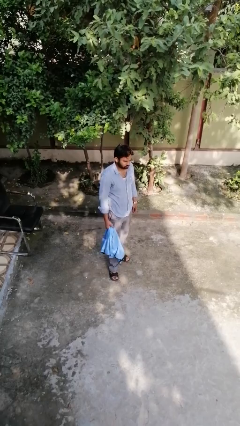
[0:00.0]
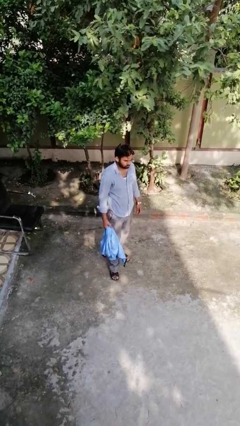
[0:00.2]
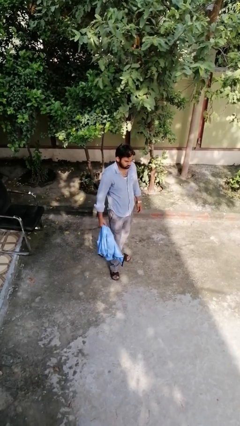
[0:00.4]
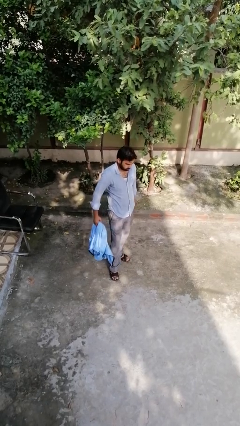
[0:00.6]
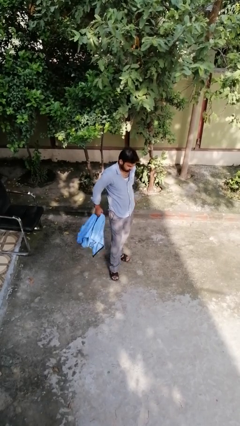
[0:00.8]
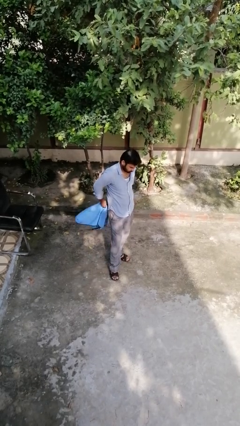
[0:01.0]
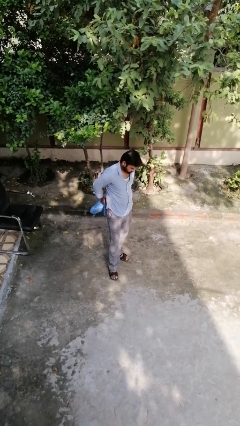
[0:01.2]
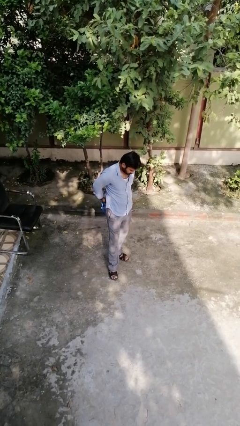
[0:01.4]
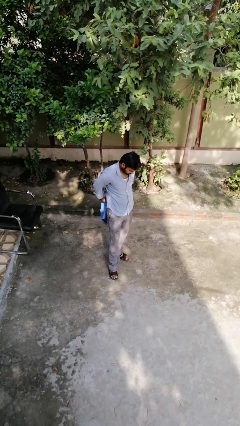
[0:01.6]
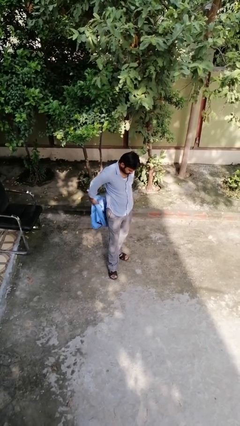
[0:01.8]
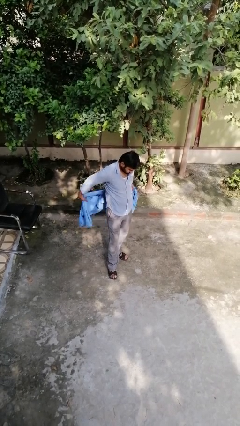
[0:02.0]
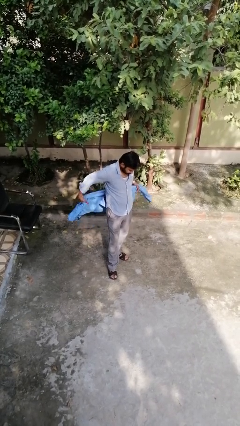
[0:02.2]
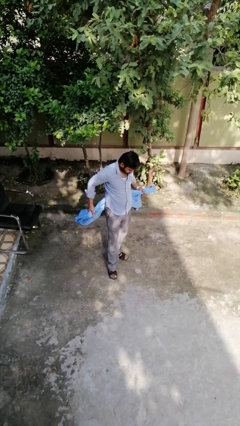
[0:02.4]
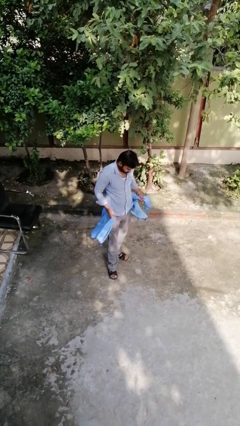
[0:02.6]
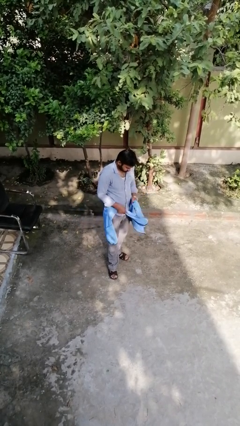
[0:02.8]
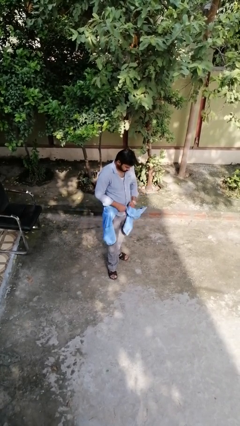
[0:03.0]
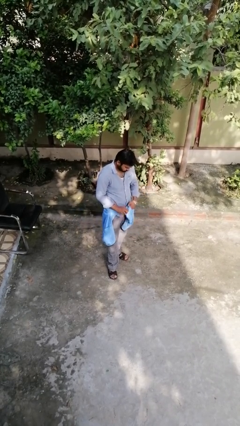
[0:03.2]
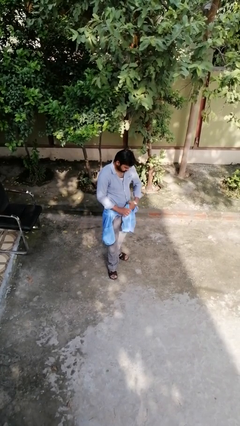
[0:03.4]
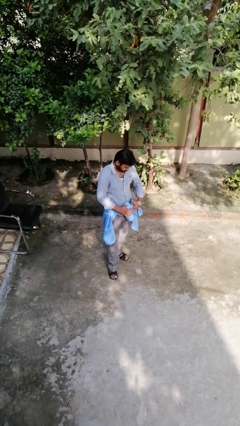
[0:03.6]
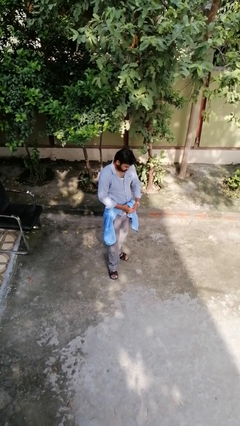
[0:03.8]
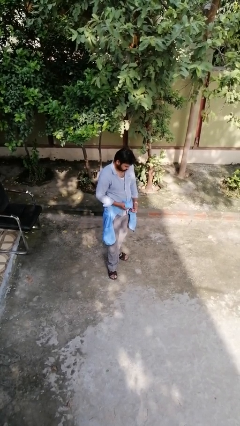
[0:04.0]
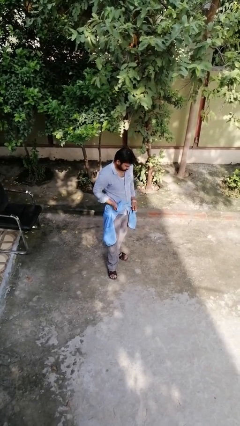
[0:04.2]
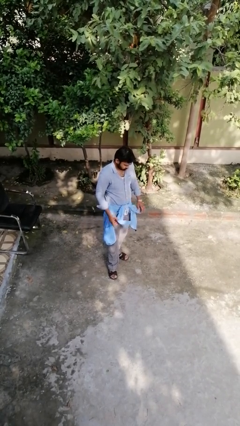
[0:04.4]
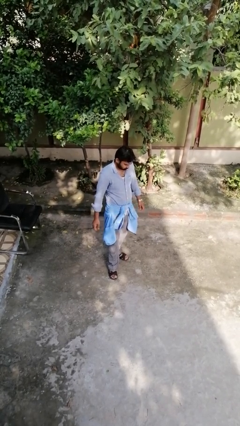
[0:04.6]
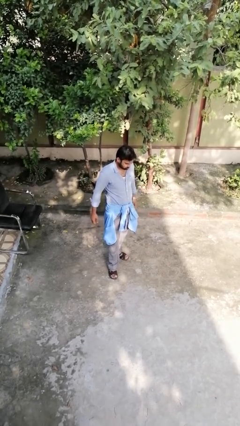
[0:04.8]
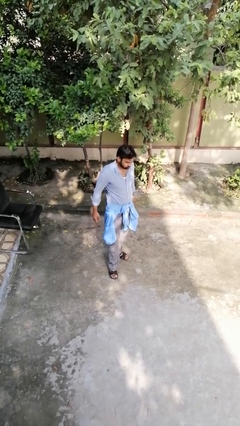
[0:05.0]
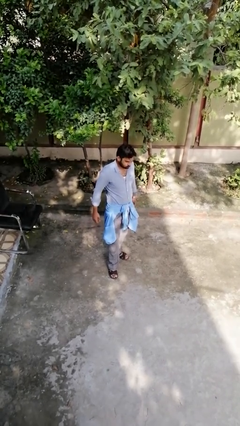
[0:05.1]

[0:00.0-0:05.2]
person ties jacket around waist

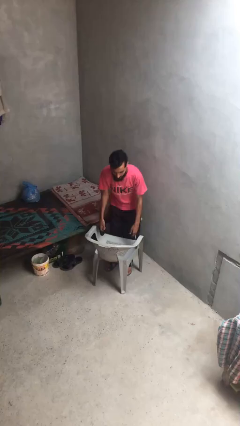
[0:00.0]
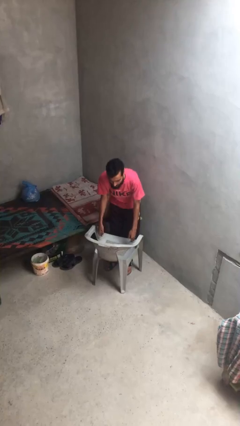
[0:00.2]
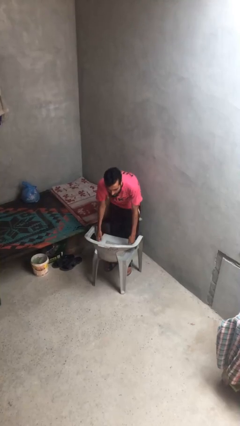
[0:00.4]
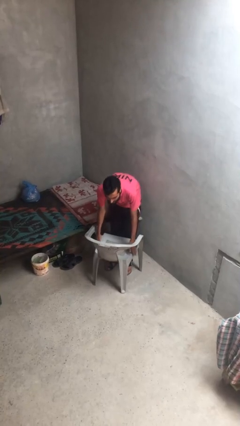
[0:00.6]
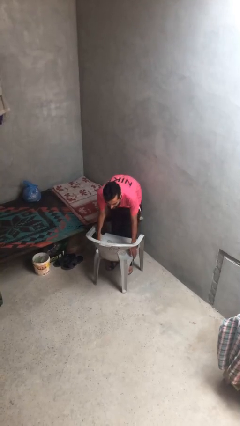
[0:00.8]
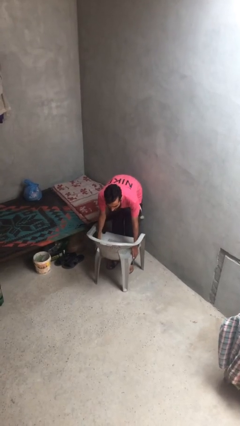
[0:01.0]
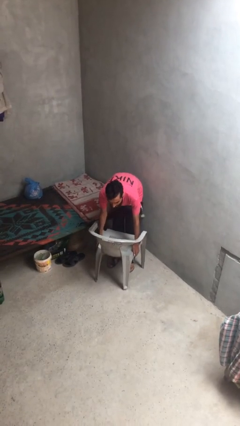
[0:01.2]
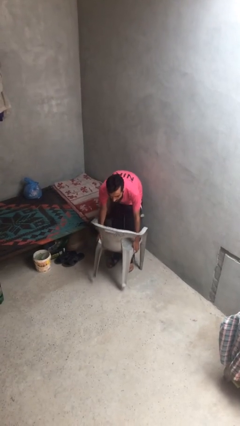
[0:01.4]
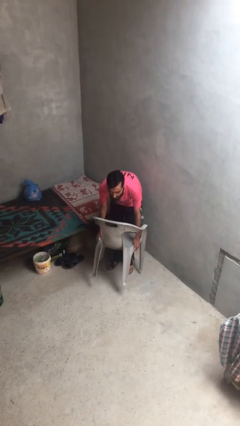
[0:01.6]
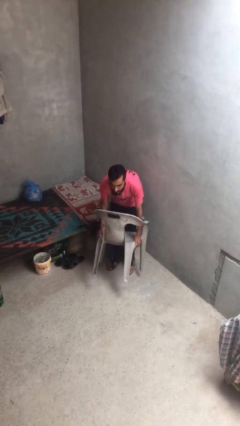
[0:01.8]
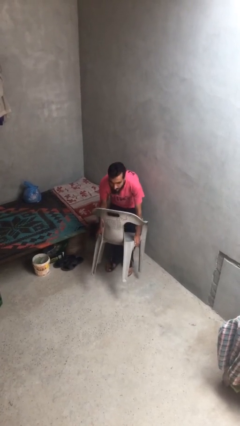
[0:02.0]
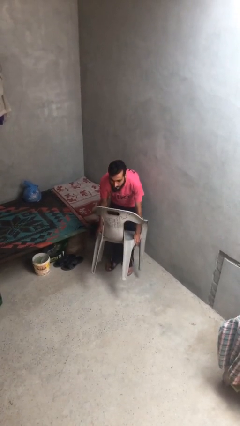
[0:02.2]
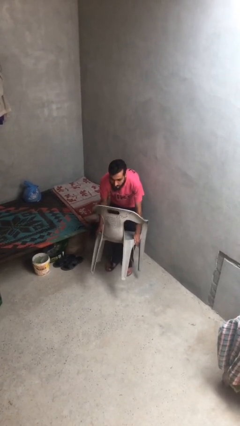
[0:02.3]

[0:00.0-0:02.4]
person picks up object from floor

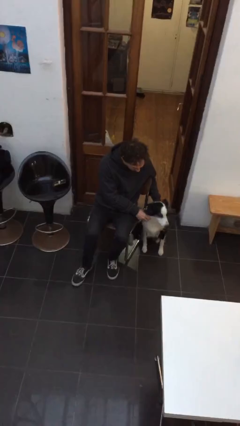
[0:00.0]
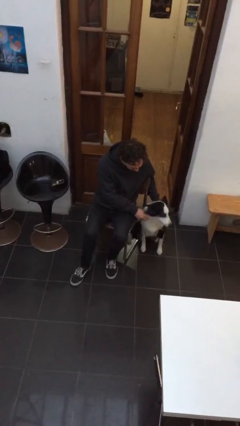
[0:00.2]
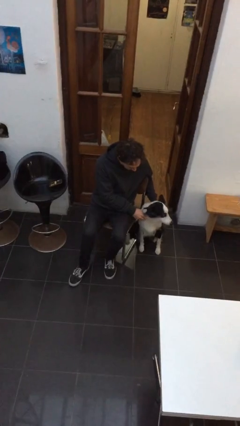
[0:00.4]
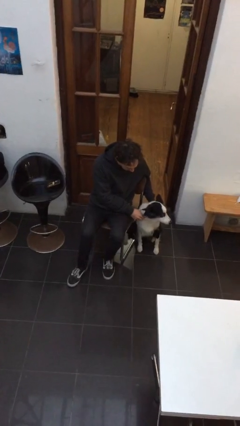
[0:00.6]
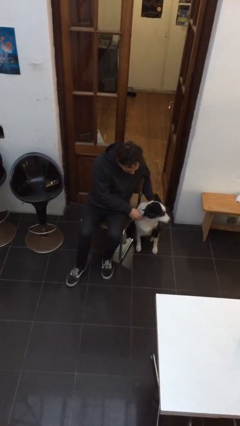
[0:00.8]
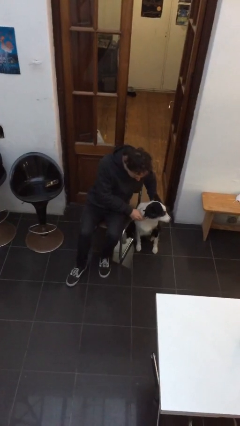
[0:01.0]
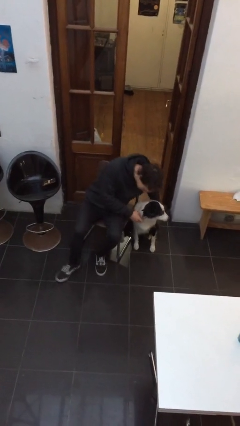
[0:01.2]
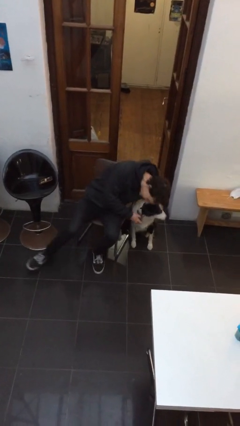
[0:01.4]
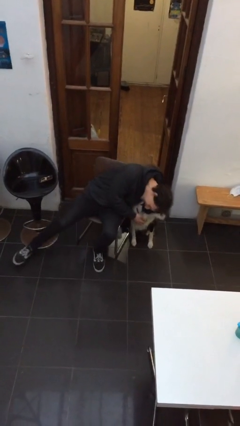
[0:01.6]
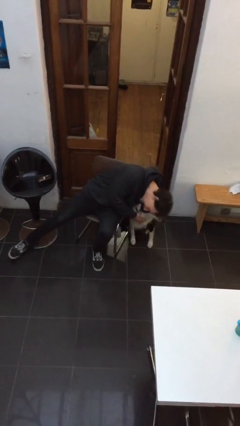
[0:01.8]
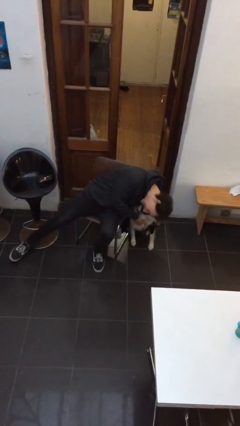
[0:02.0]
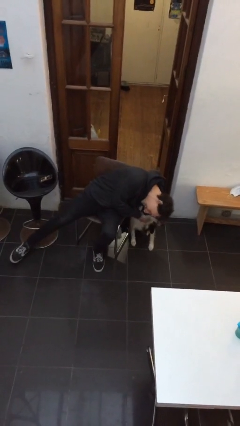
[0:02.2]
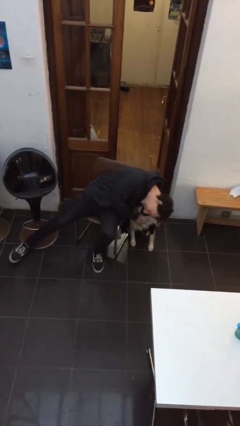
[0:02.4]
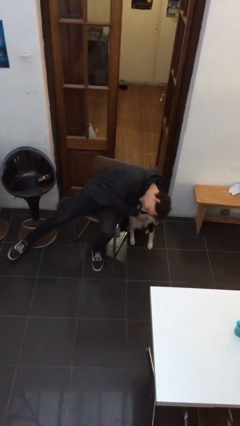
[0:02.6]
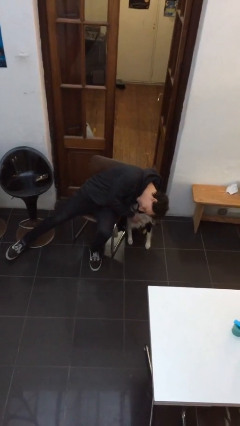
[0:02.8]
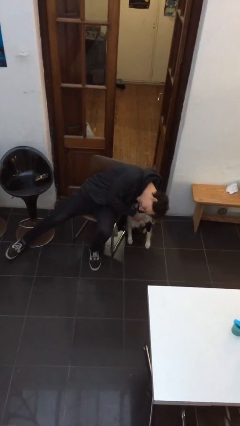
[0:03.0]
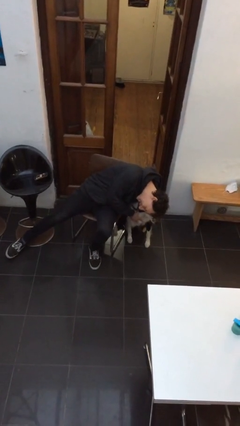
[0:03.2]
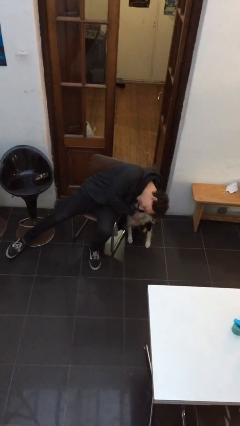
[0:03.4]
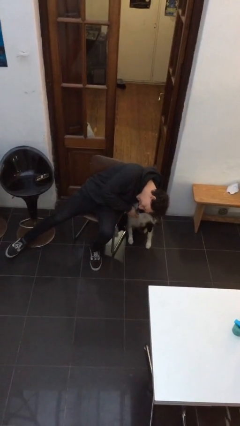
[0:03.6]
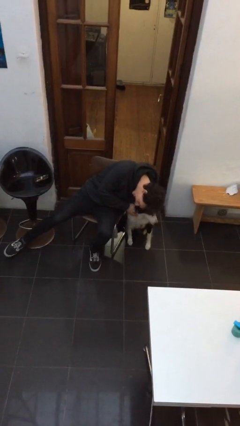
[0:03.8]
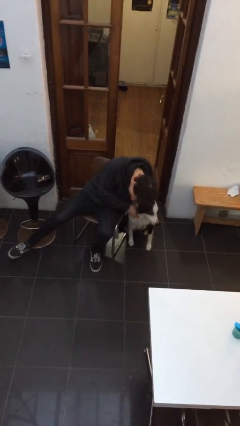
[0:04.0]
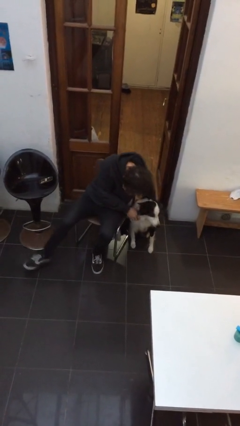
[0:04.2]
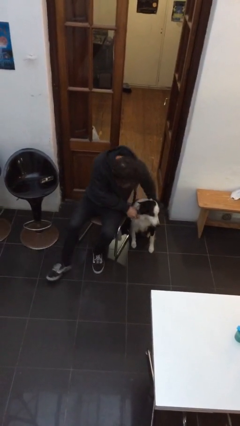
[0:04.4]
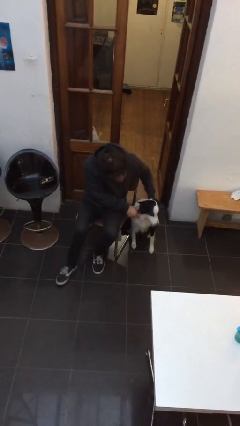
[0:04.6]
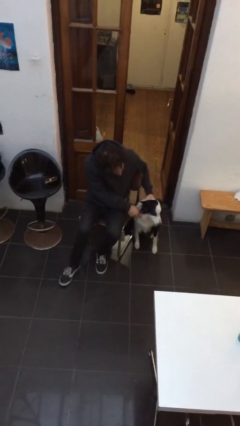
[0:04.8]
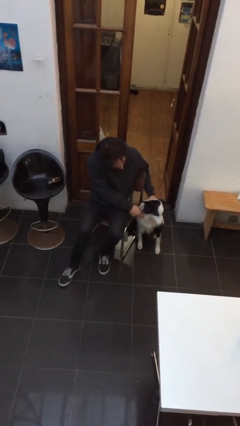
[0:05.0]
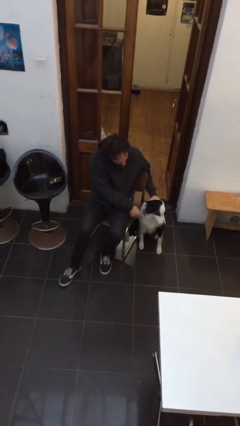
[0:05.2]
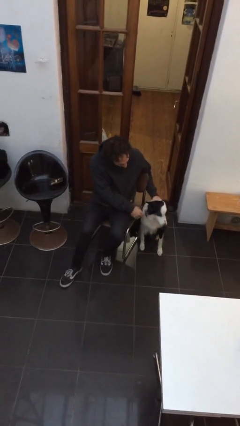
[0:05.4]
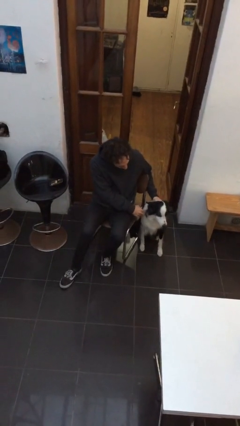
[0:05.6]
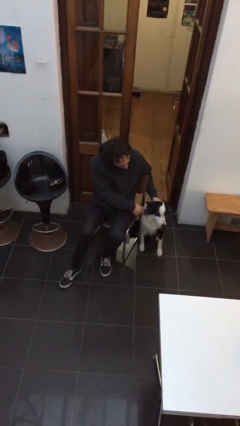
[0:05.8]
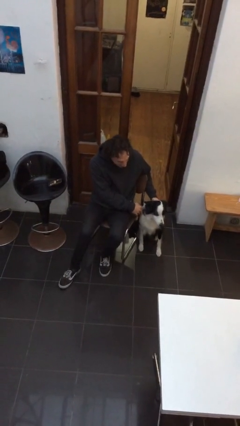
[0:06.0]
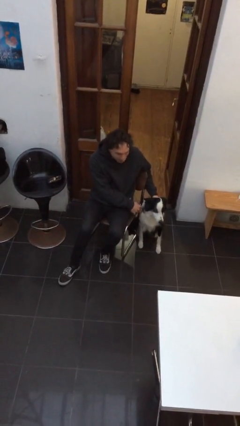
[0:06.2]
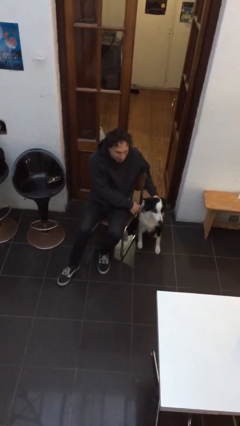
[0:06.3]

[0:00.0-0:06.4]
person hugs dog

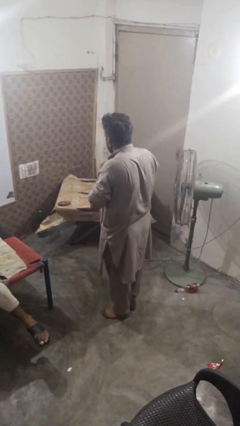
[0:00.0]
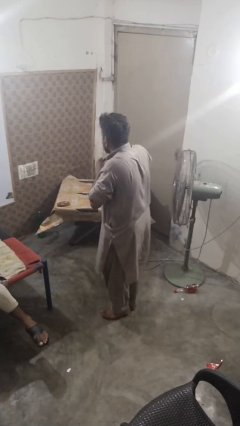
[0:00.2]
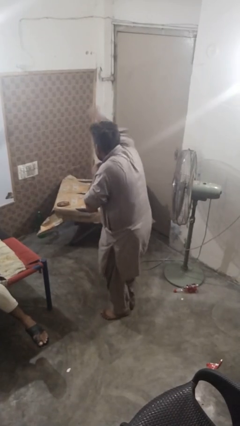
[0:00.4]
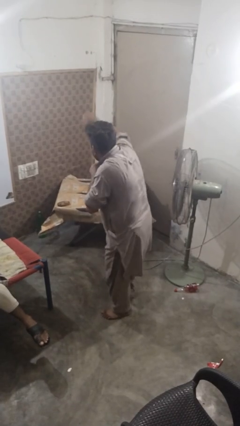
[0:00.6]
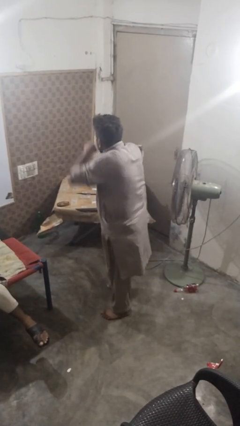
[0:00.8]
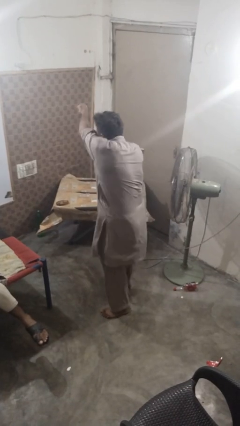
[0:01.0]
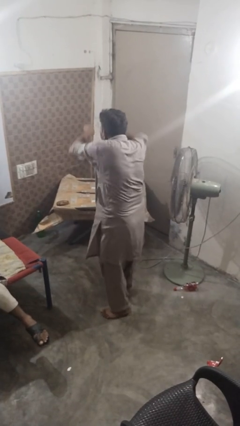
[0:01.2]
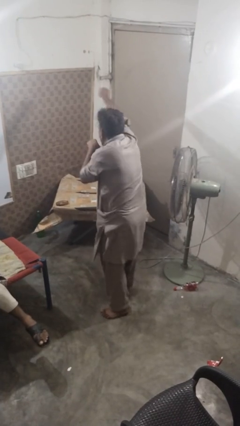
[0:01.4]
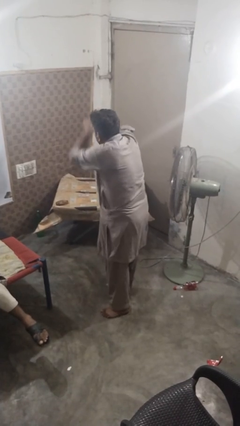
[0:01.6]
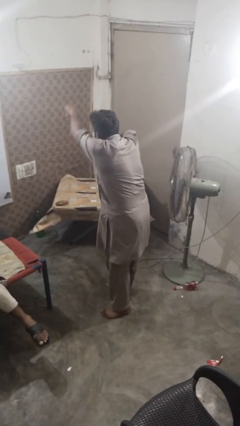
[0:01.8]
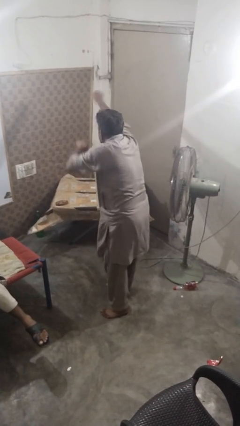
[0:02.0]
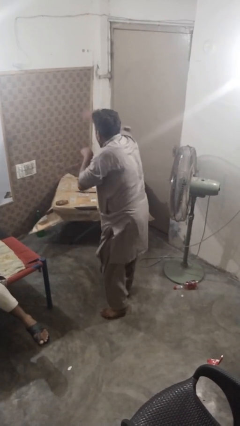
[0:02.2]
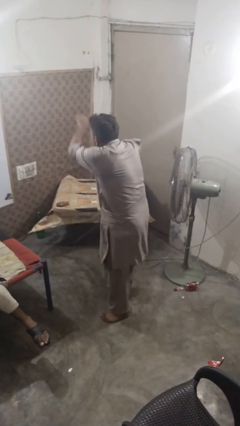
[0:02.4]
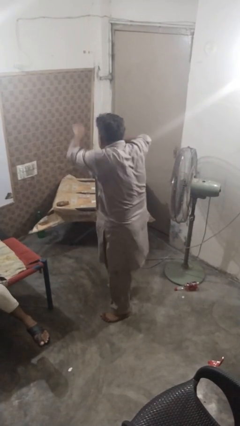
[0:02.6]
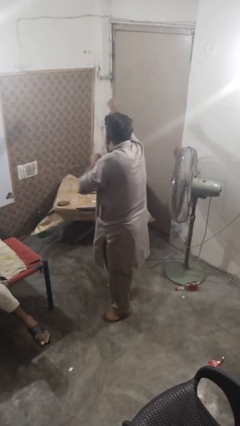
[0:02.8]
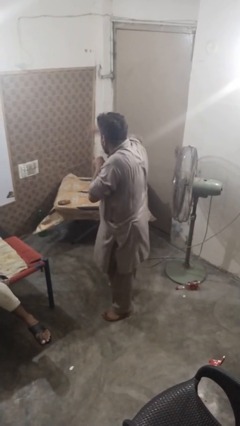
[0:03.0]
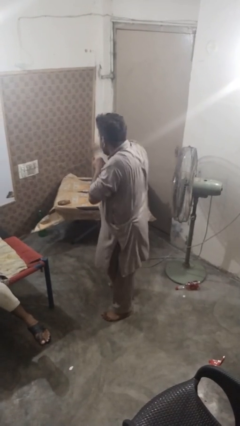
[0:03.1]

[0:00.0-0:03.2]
person punches

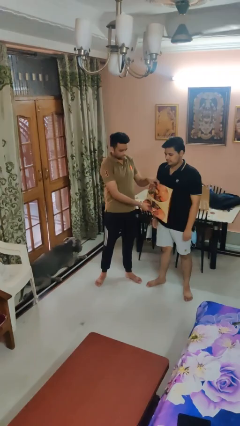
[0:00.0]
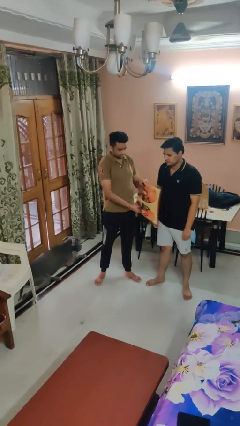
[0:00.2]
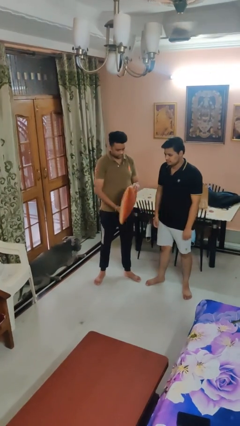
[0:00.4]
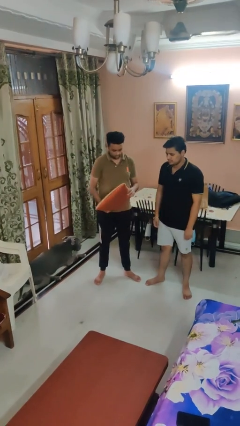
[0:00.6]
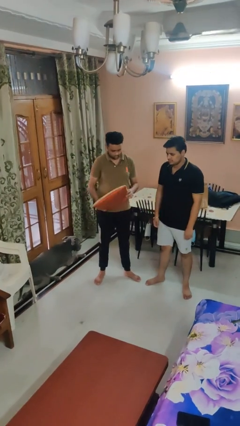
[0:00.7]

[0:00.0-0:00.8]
person hits person with pillow
